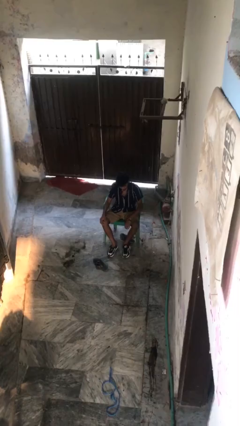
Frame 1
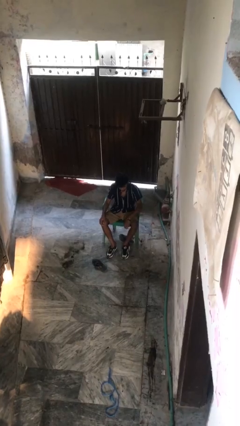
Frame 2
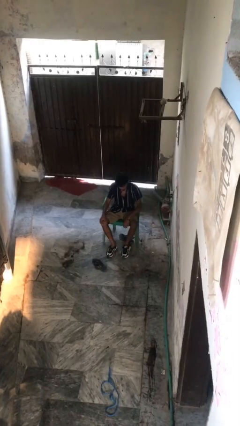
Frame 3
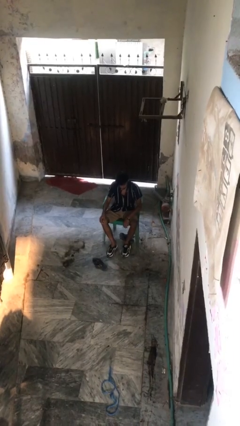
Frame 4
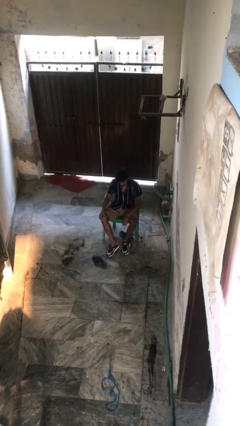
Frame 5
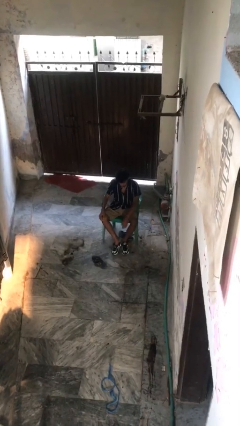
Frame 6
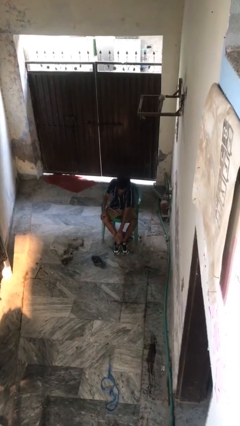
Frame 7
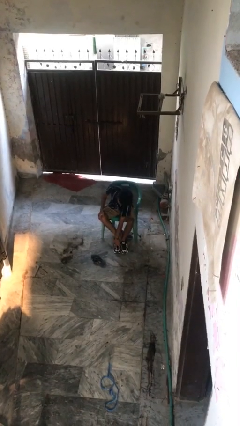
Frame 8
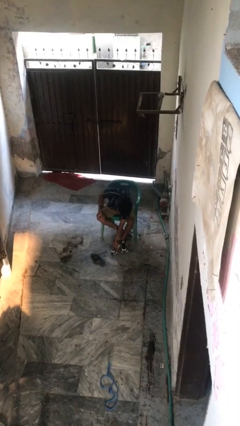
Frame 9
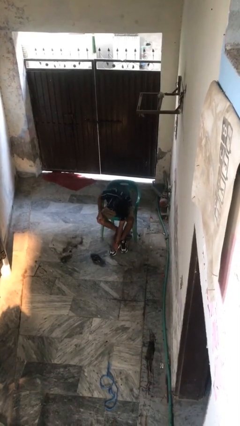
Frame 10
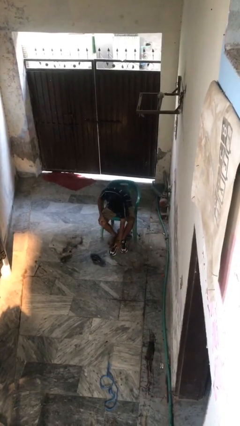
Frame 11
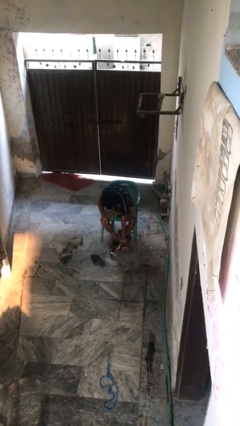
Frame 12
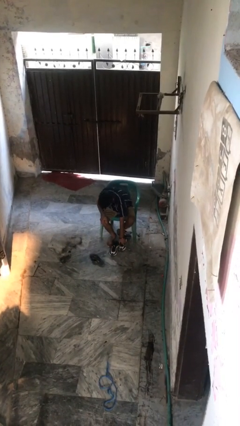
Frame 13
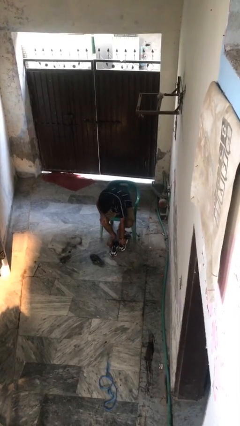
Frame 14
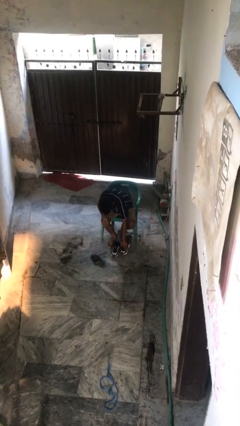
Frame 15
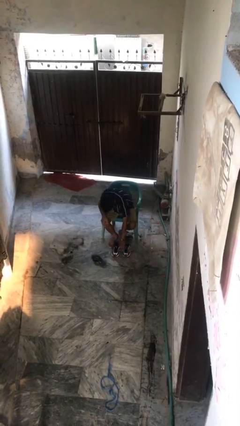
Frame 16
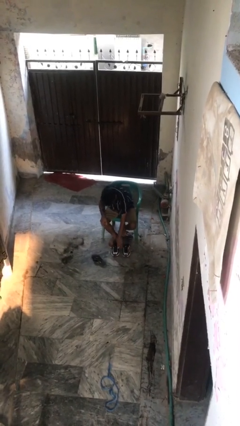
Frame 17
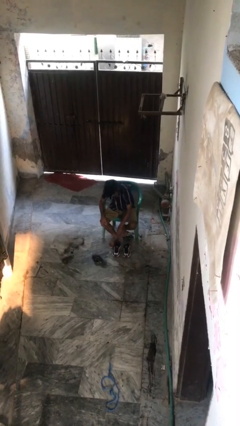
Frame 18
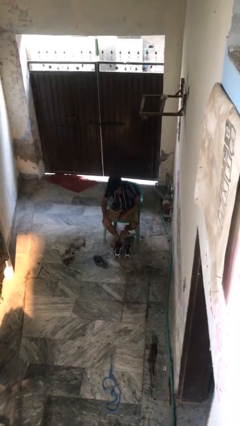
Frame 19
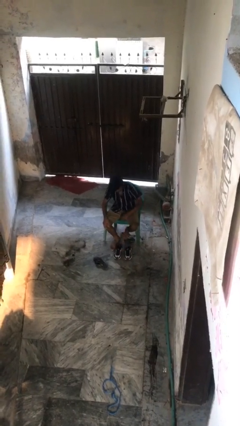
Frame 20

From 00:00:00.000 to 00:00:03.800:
person takes off shoes

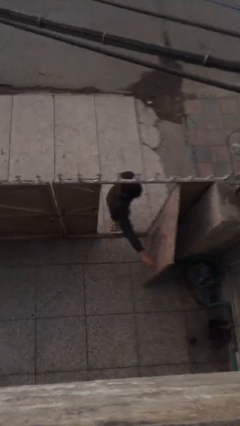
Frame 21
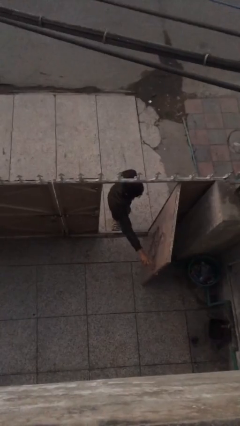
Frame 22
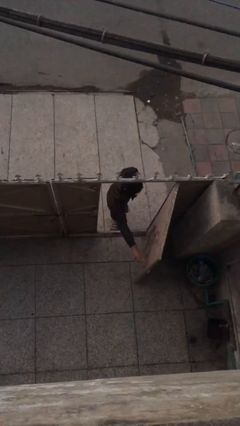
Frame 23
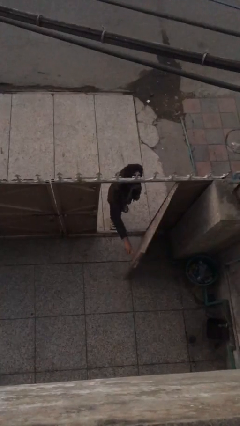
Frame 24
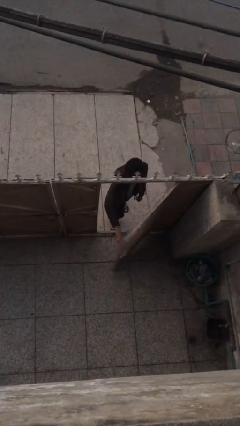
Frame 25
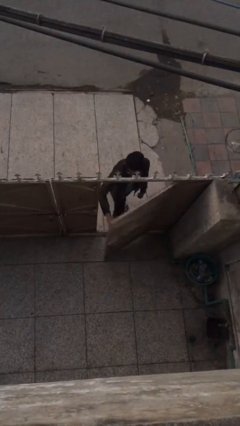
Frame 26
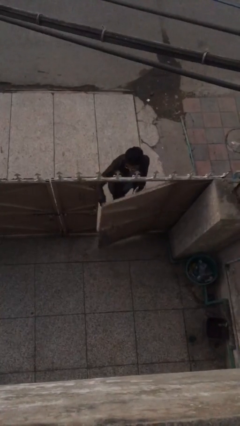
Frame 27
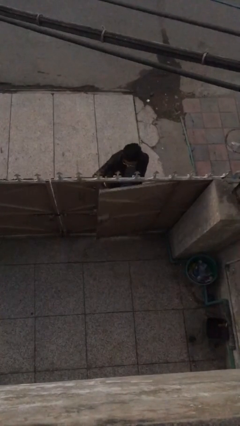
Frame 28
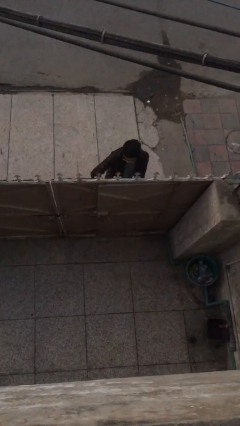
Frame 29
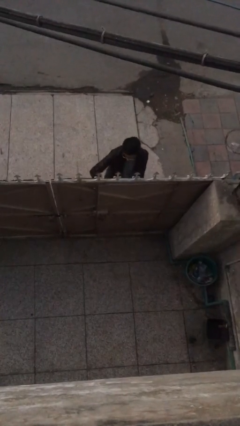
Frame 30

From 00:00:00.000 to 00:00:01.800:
person closes facility door

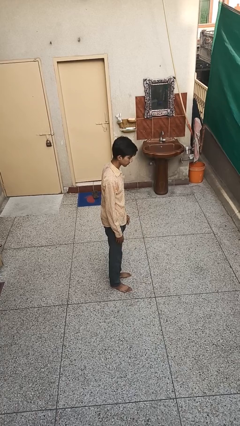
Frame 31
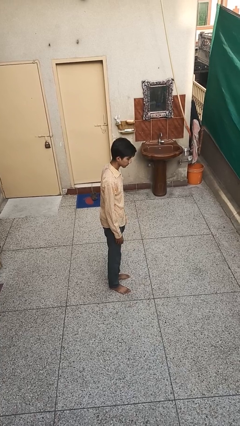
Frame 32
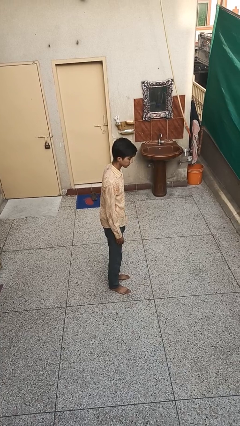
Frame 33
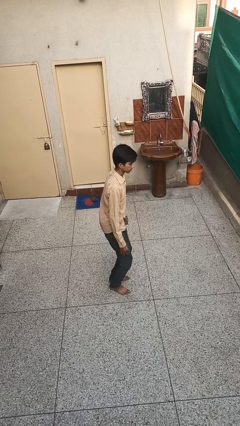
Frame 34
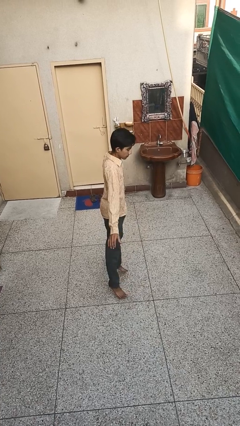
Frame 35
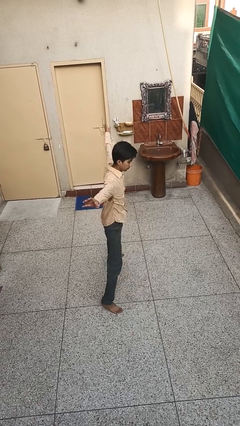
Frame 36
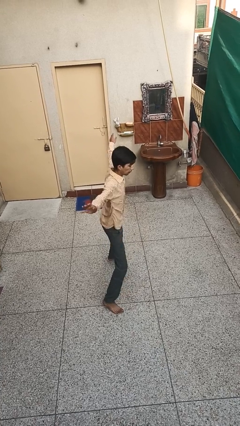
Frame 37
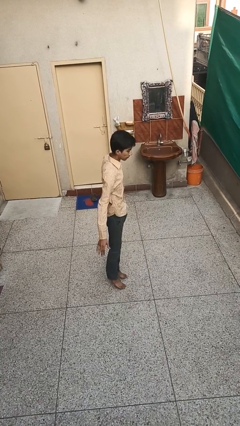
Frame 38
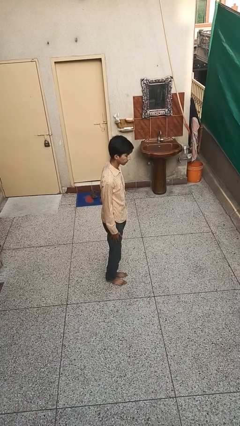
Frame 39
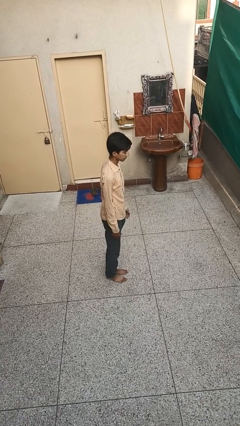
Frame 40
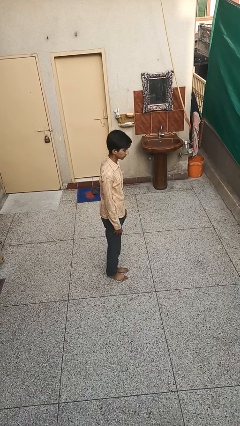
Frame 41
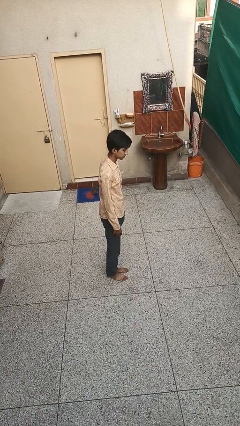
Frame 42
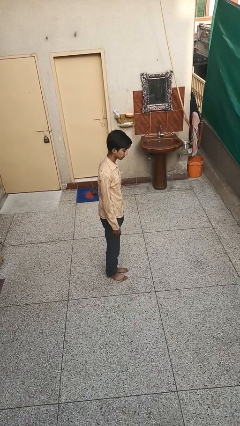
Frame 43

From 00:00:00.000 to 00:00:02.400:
person exercises with jumping jacks

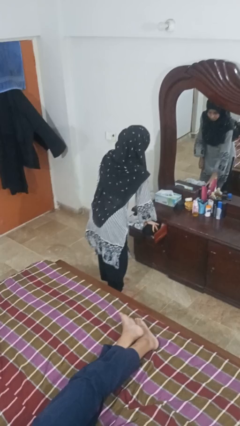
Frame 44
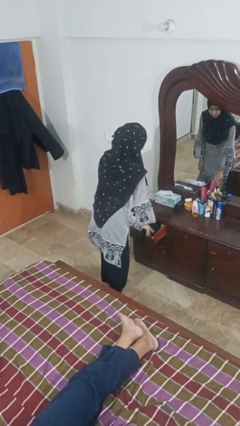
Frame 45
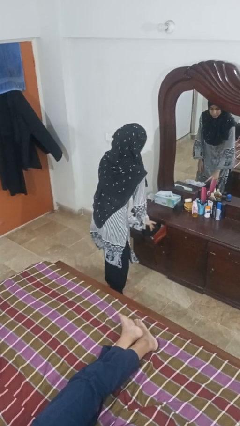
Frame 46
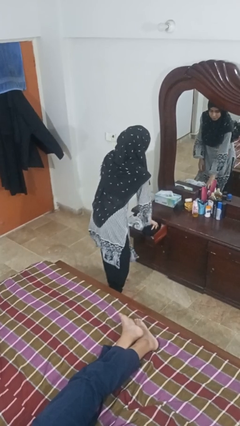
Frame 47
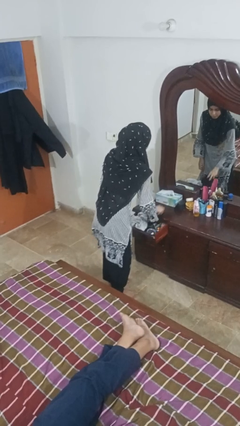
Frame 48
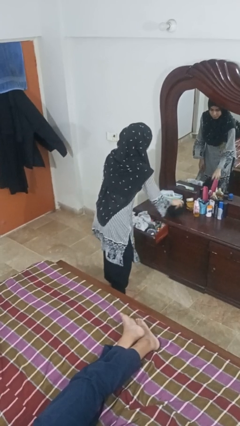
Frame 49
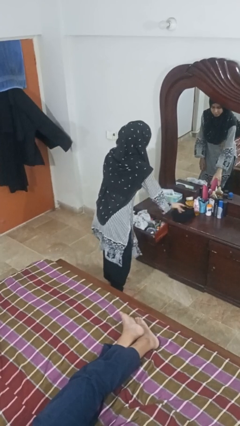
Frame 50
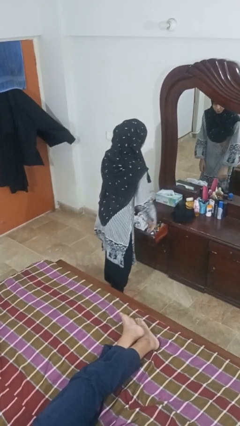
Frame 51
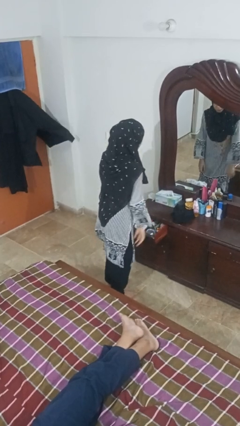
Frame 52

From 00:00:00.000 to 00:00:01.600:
person takes clothes from dresser

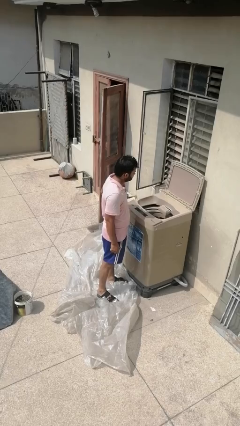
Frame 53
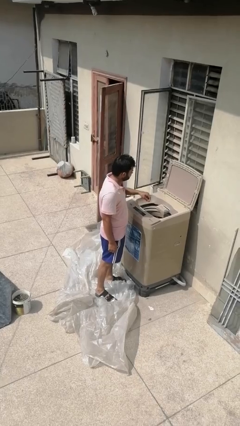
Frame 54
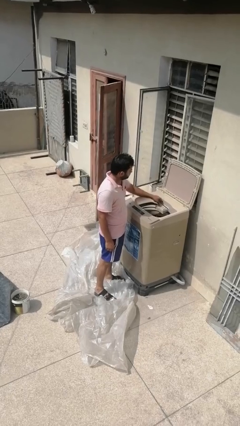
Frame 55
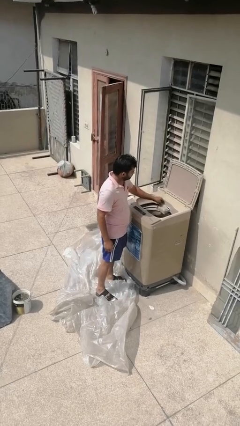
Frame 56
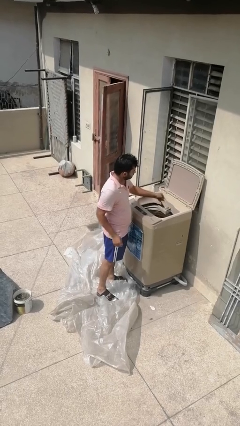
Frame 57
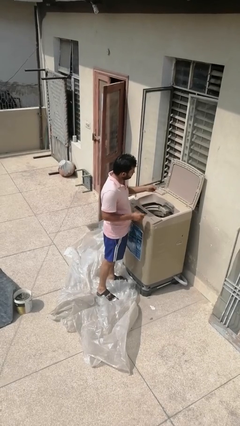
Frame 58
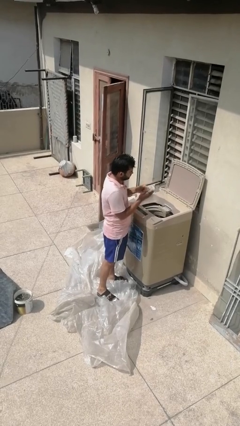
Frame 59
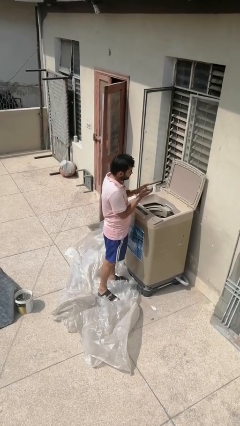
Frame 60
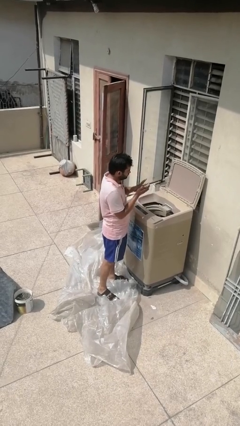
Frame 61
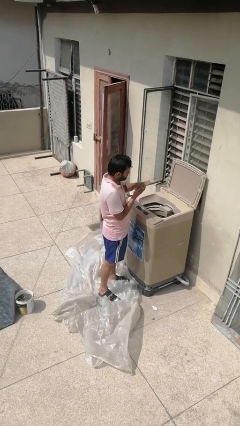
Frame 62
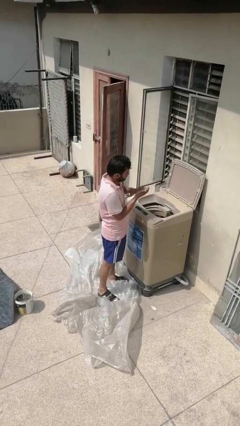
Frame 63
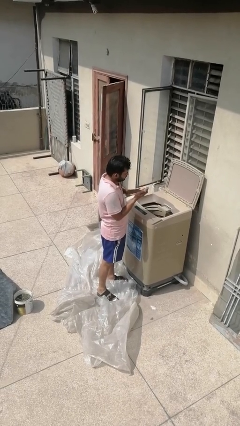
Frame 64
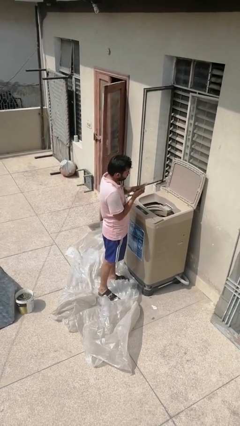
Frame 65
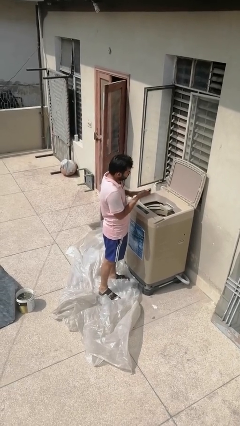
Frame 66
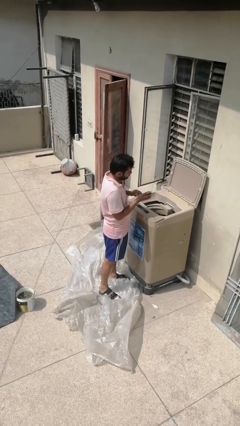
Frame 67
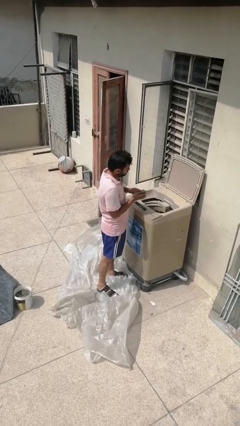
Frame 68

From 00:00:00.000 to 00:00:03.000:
person cleans dryer lint trap

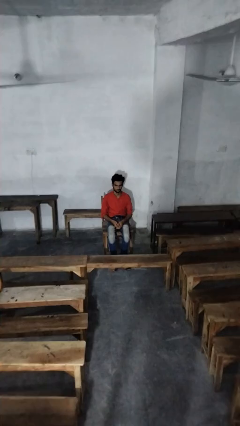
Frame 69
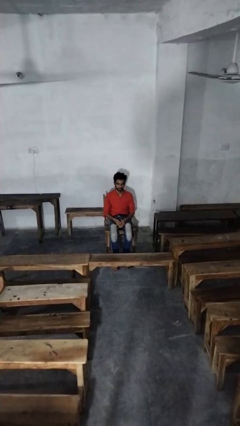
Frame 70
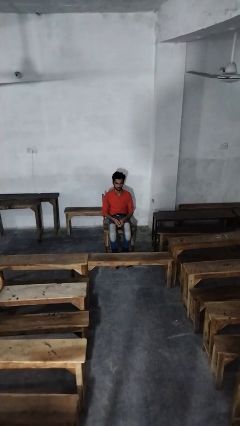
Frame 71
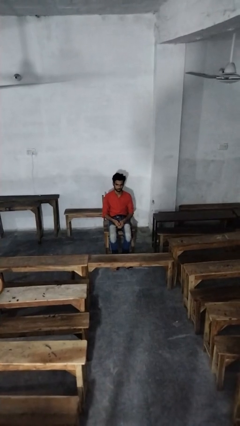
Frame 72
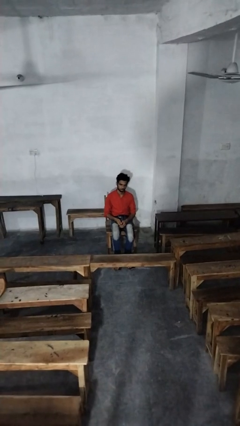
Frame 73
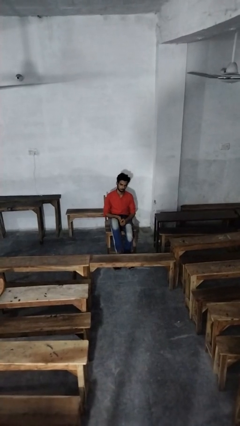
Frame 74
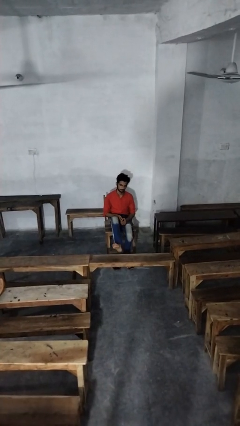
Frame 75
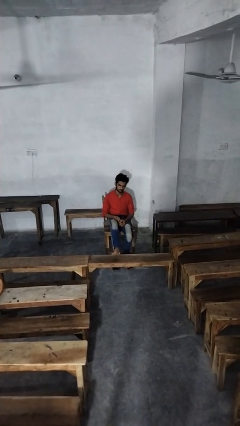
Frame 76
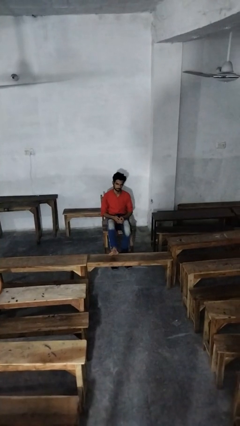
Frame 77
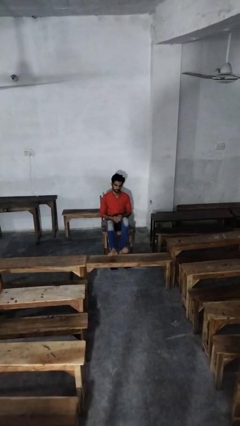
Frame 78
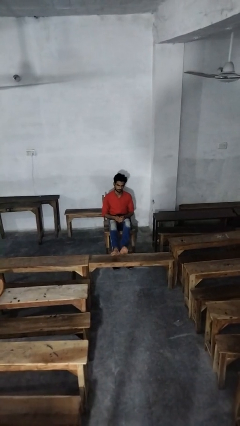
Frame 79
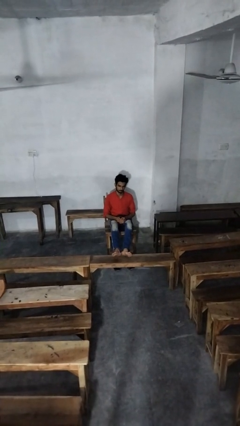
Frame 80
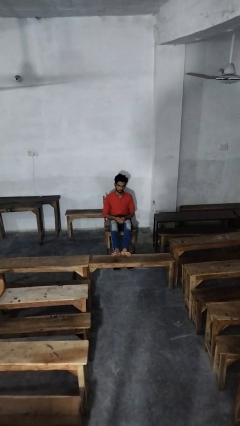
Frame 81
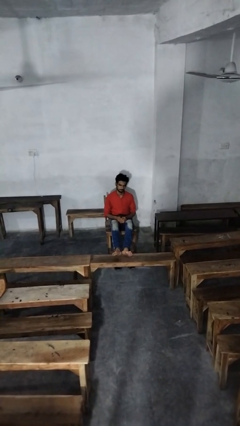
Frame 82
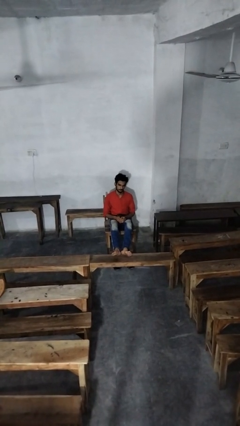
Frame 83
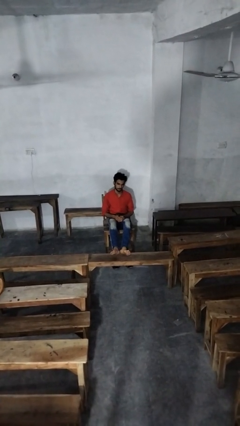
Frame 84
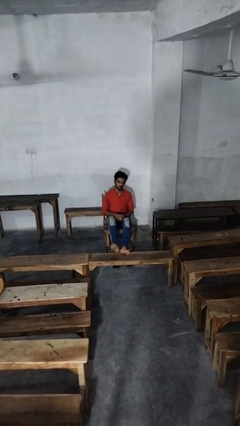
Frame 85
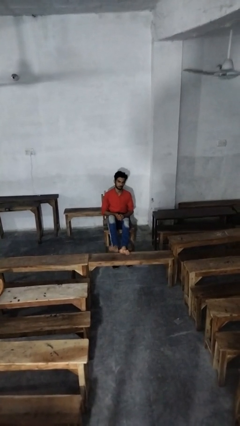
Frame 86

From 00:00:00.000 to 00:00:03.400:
person puts feet up

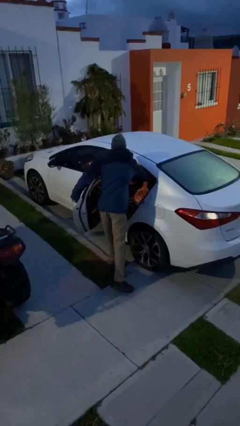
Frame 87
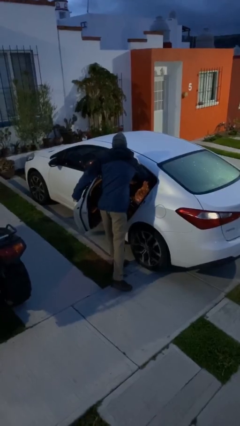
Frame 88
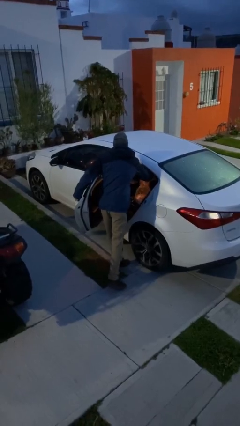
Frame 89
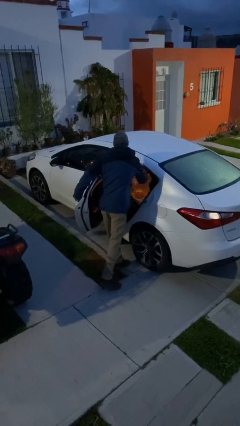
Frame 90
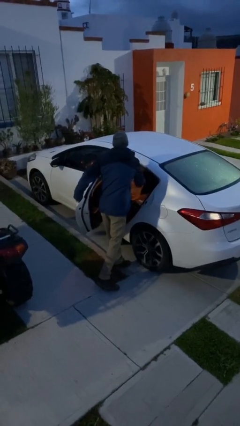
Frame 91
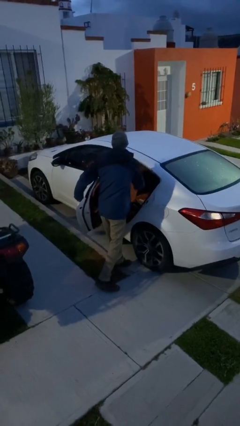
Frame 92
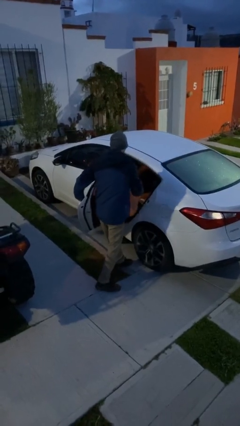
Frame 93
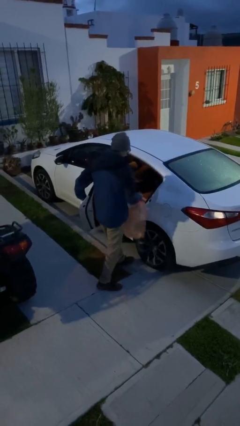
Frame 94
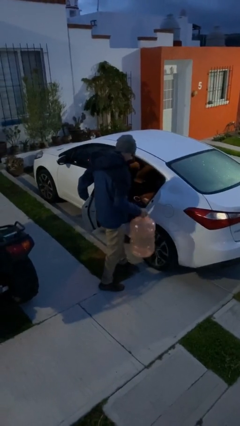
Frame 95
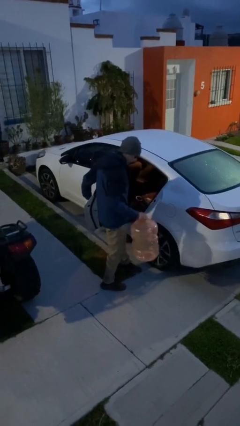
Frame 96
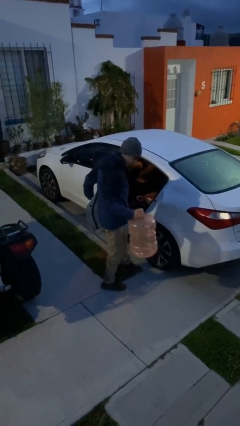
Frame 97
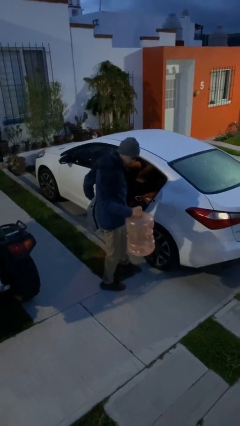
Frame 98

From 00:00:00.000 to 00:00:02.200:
person unloads car
